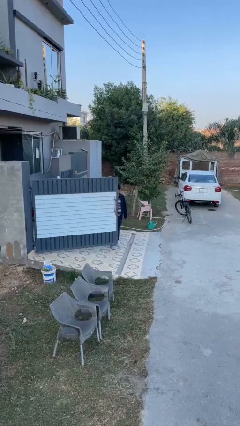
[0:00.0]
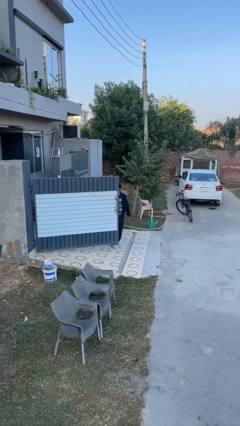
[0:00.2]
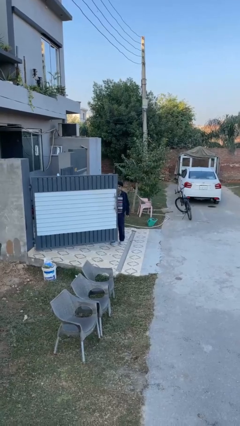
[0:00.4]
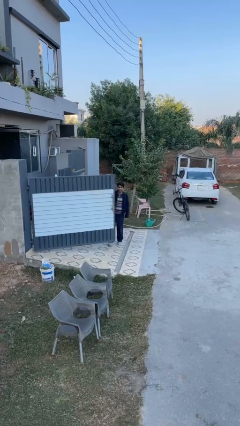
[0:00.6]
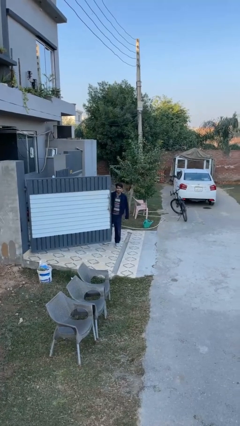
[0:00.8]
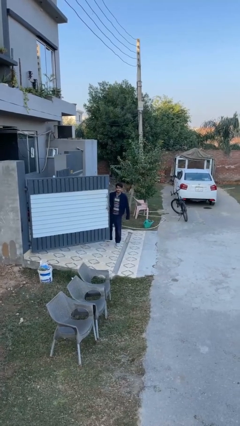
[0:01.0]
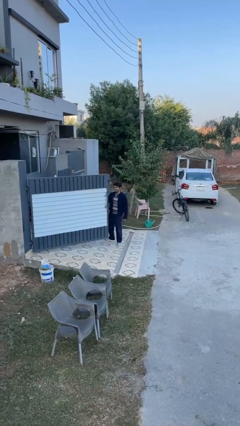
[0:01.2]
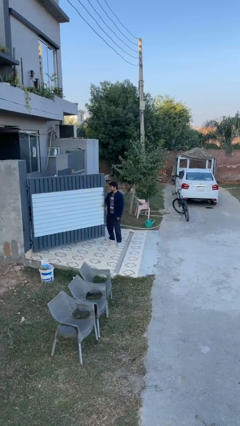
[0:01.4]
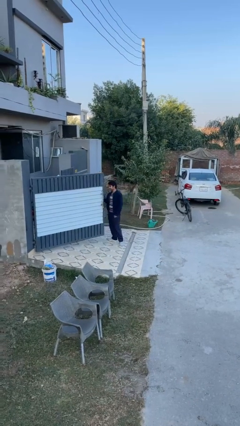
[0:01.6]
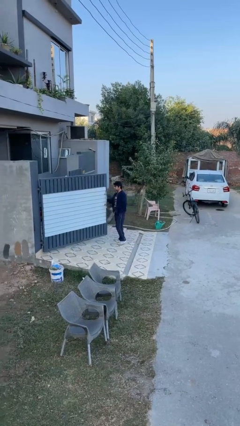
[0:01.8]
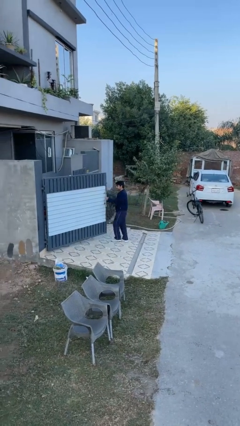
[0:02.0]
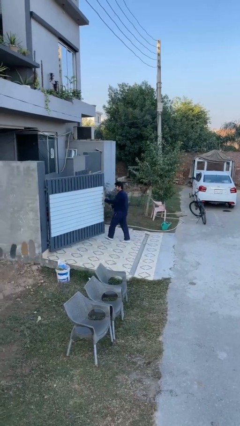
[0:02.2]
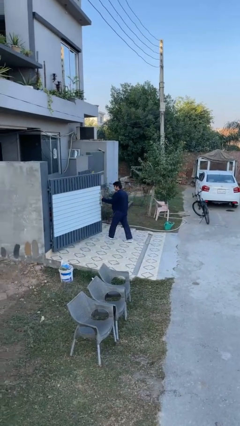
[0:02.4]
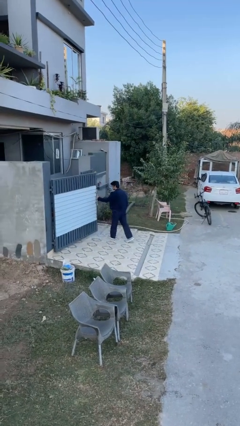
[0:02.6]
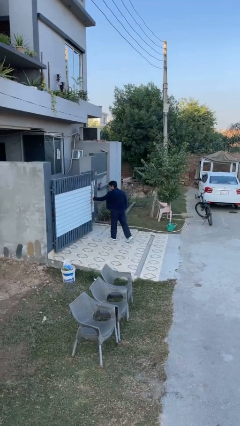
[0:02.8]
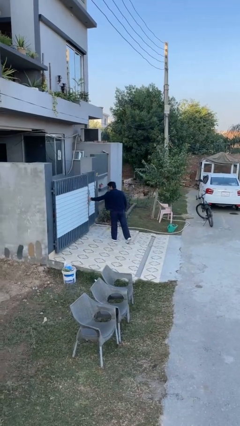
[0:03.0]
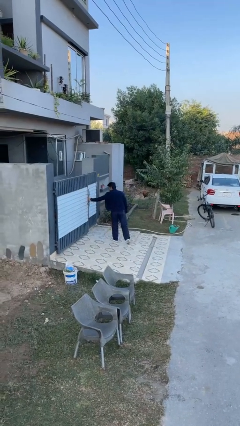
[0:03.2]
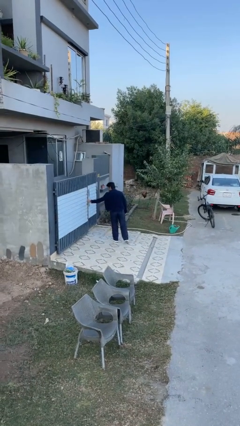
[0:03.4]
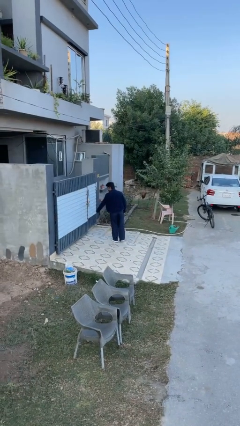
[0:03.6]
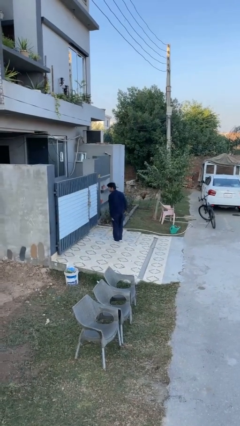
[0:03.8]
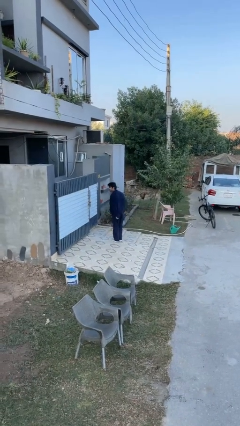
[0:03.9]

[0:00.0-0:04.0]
person closes facility door

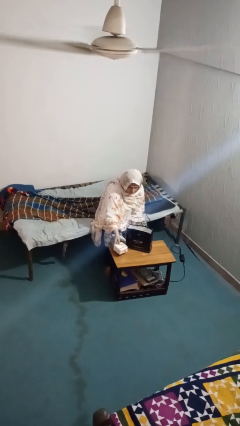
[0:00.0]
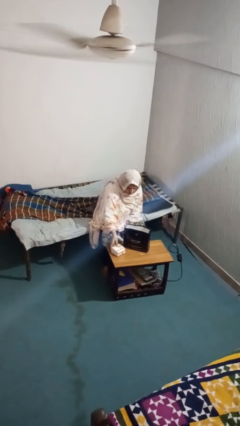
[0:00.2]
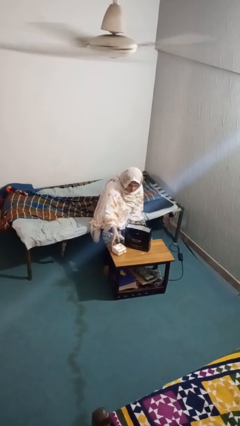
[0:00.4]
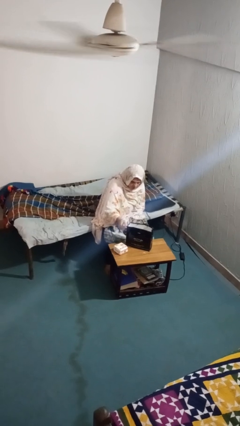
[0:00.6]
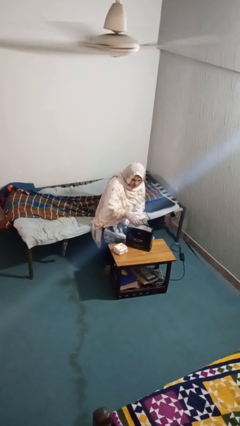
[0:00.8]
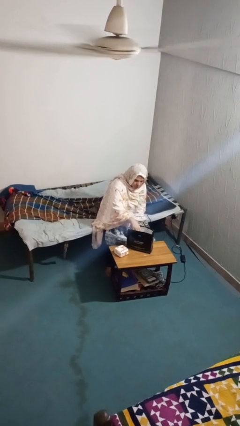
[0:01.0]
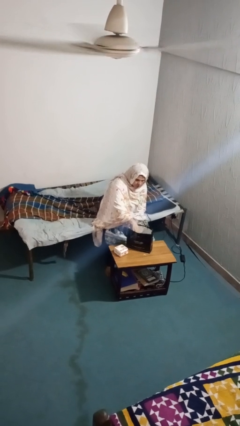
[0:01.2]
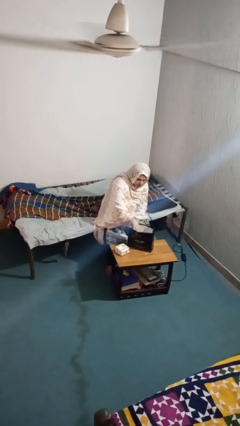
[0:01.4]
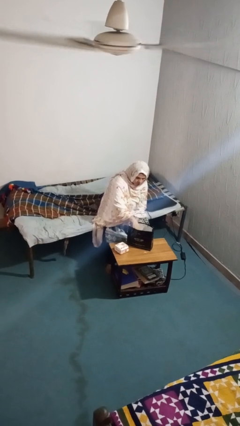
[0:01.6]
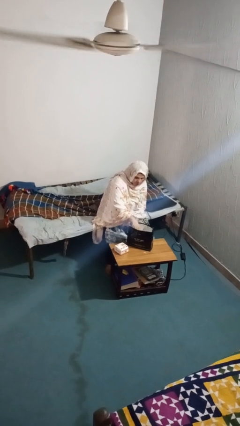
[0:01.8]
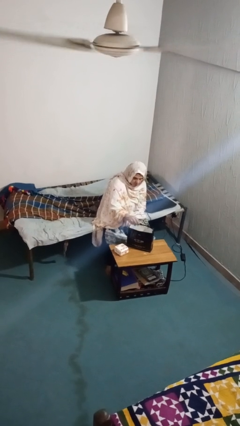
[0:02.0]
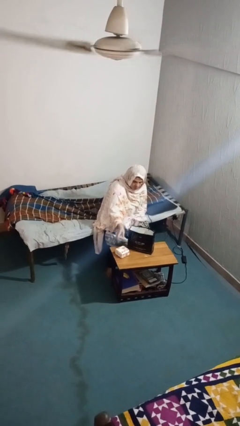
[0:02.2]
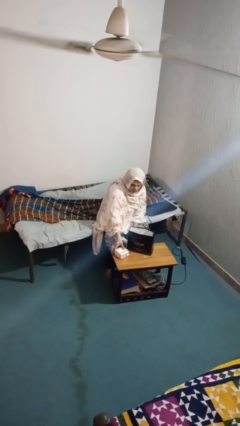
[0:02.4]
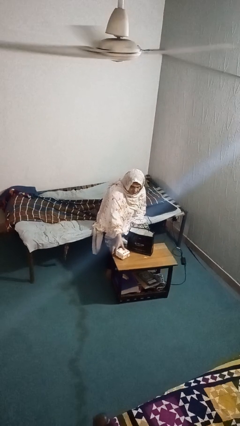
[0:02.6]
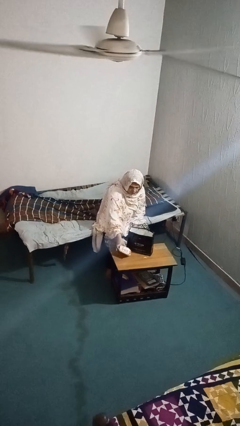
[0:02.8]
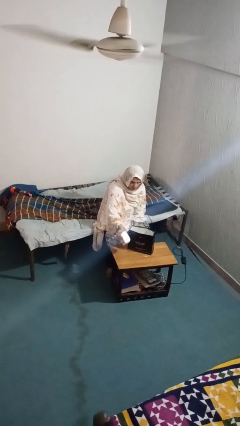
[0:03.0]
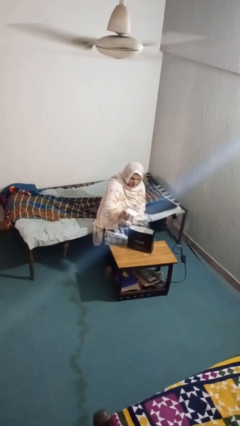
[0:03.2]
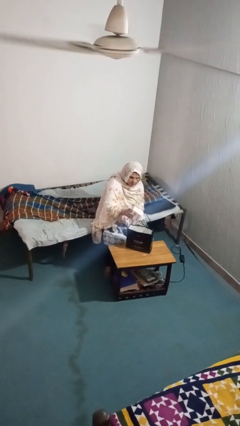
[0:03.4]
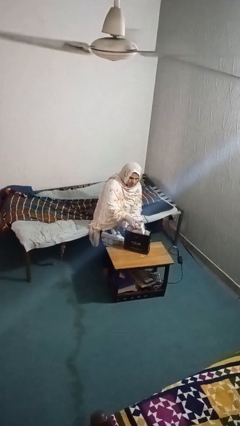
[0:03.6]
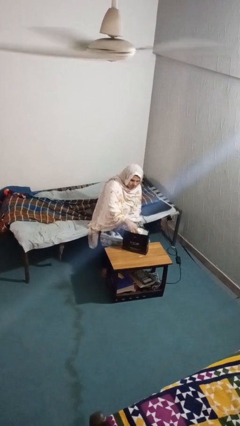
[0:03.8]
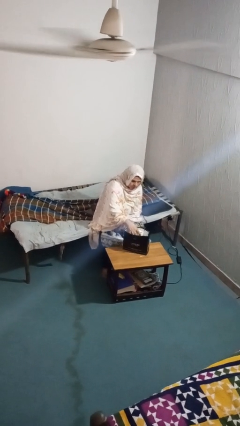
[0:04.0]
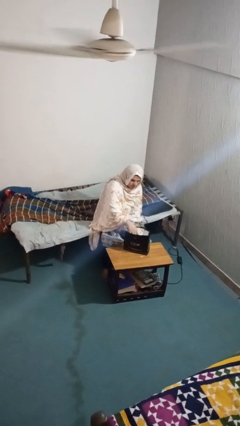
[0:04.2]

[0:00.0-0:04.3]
person puts object into bag

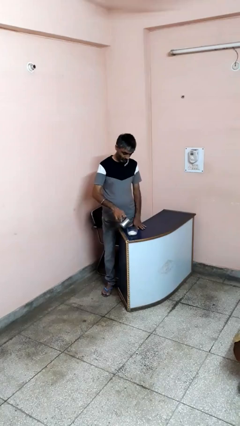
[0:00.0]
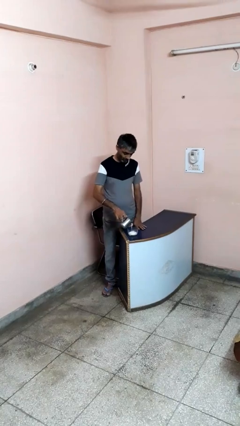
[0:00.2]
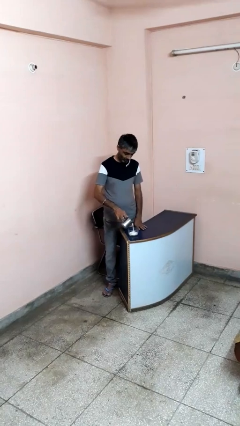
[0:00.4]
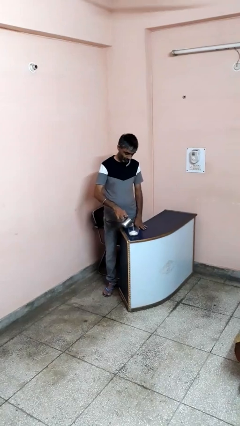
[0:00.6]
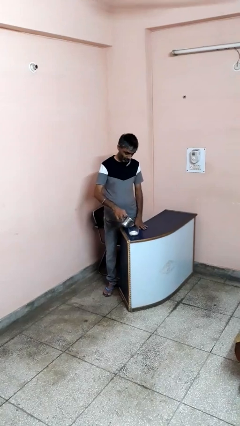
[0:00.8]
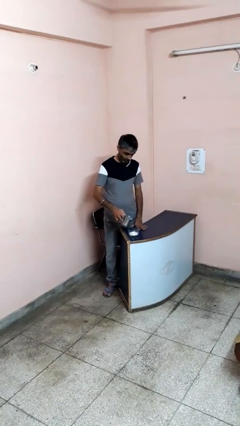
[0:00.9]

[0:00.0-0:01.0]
person pours into bowl

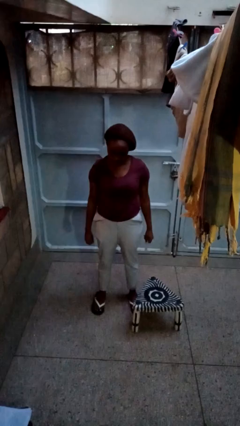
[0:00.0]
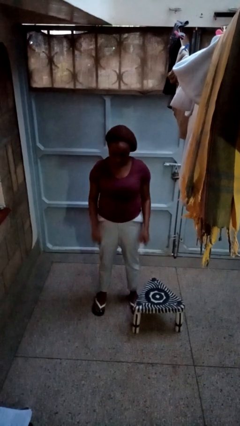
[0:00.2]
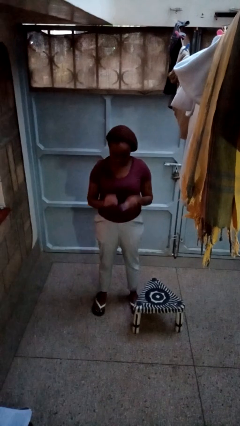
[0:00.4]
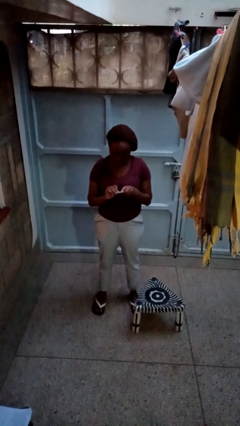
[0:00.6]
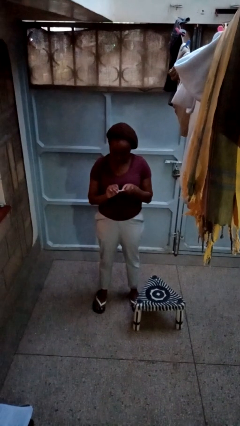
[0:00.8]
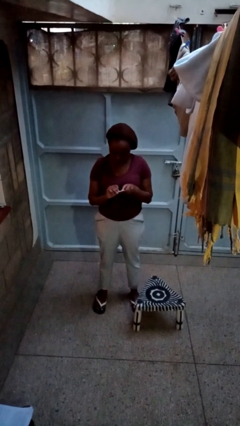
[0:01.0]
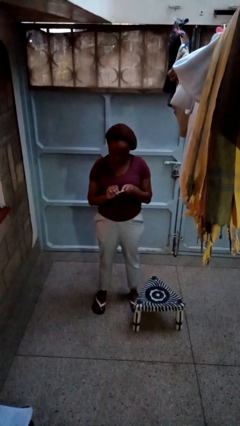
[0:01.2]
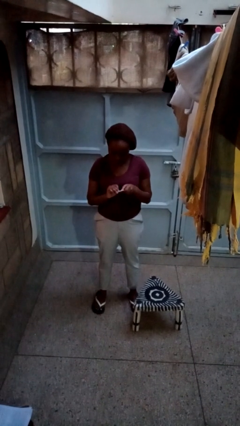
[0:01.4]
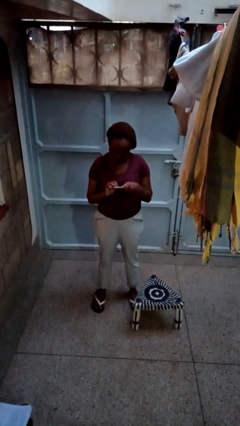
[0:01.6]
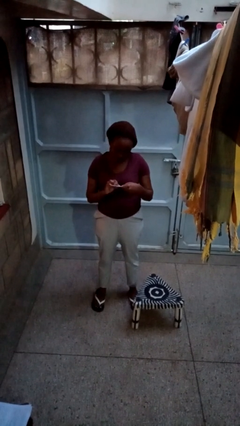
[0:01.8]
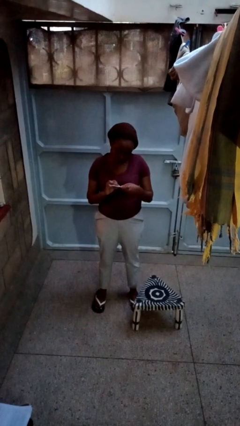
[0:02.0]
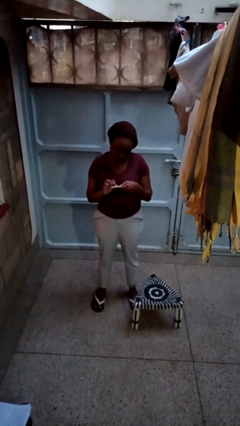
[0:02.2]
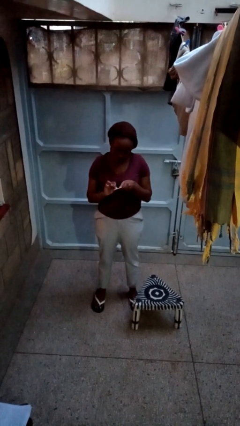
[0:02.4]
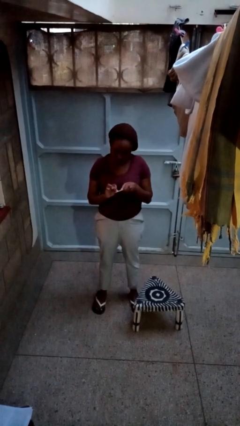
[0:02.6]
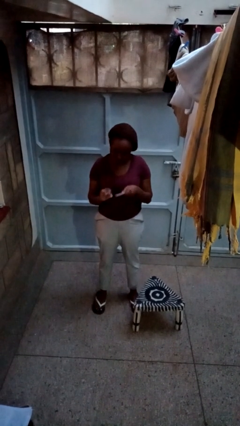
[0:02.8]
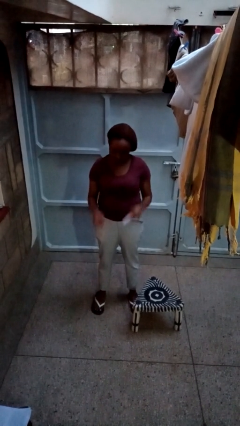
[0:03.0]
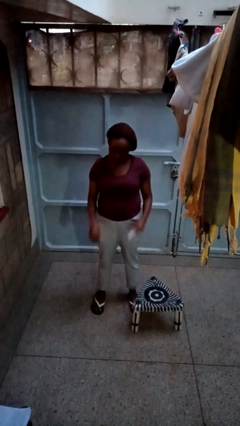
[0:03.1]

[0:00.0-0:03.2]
person files fingernails

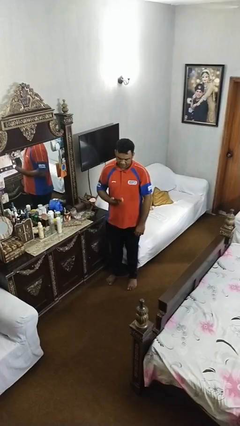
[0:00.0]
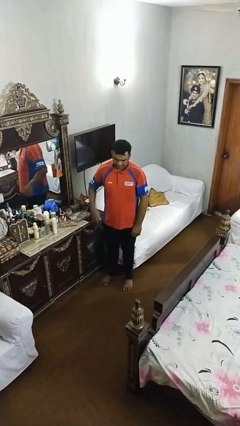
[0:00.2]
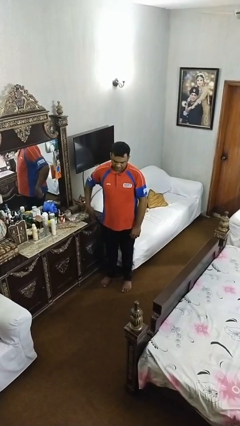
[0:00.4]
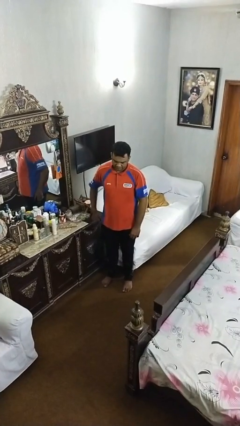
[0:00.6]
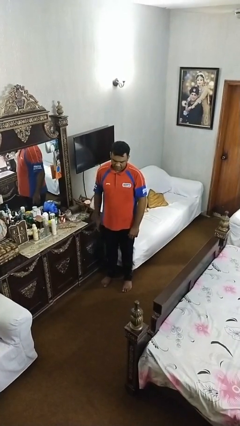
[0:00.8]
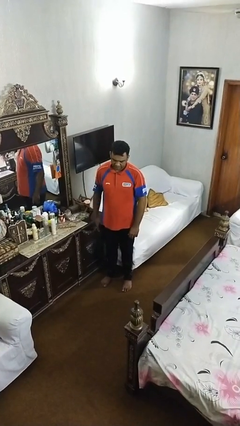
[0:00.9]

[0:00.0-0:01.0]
person puts phone into pocket

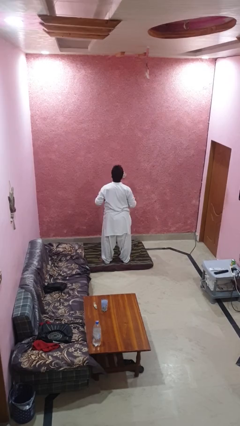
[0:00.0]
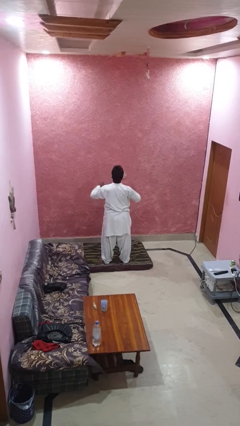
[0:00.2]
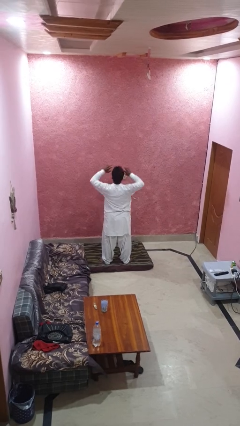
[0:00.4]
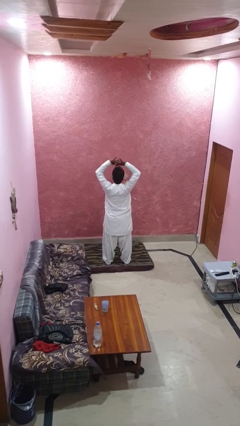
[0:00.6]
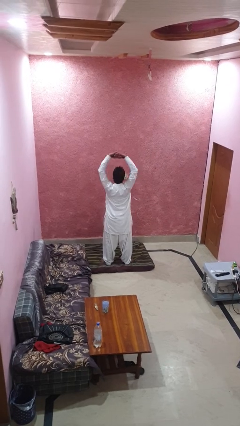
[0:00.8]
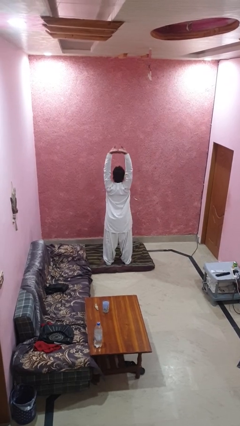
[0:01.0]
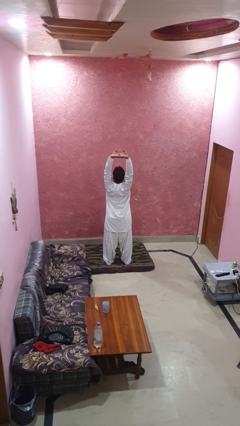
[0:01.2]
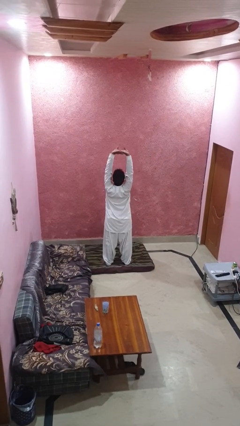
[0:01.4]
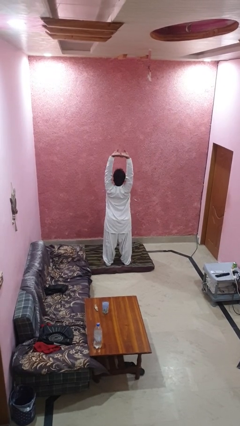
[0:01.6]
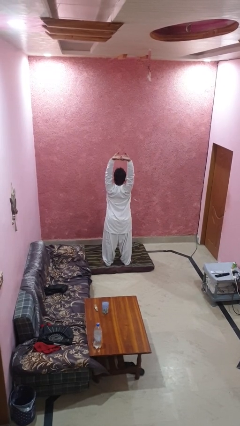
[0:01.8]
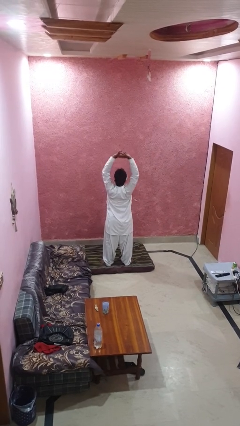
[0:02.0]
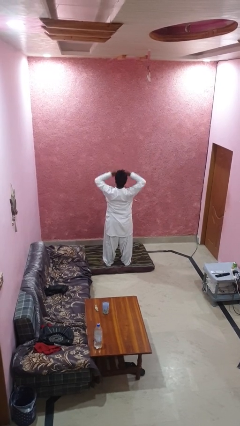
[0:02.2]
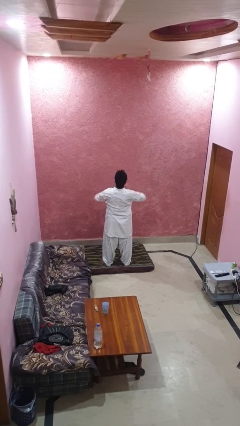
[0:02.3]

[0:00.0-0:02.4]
person stretches arms over head

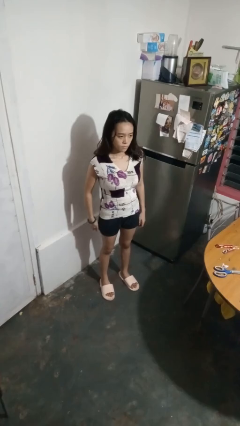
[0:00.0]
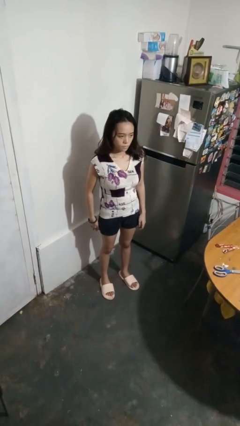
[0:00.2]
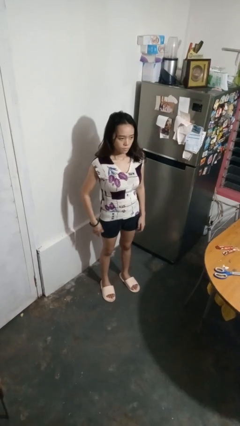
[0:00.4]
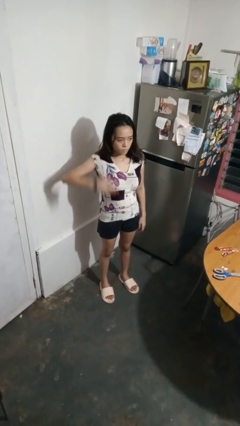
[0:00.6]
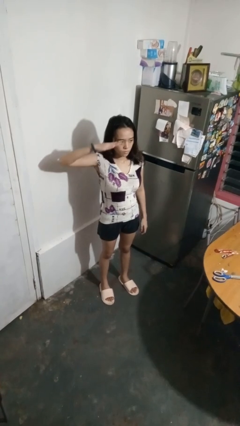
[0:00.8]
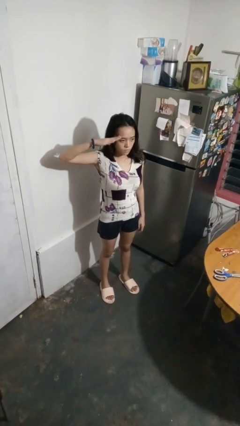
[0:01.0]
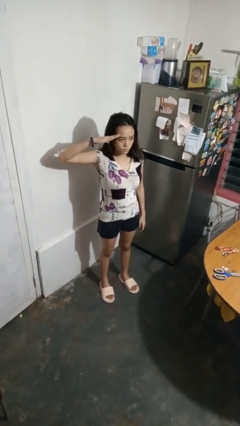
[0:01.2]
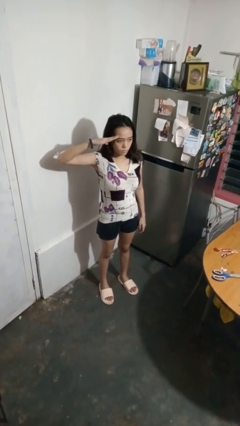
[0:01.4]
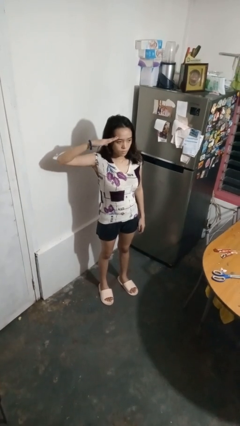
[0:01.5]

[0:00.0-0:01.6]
person salutes
